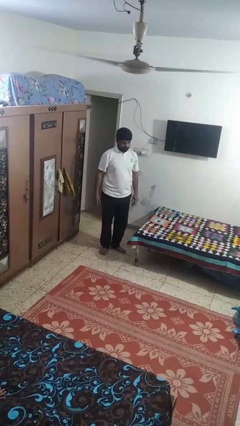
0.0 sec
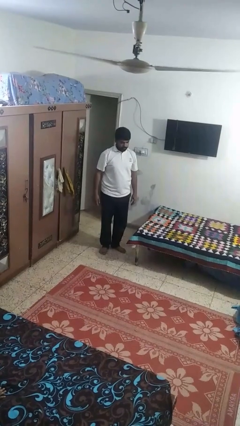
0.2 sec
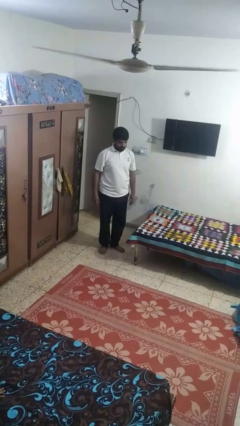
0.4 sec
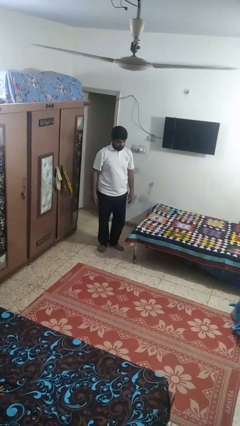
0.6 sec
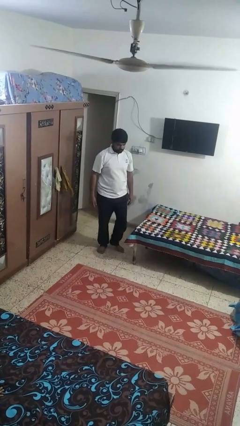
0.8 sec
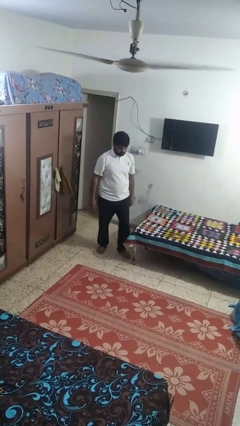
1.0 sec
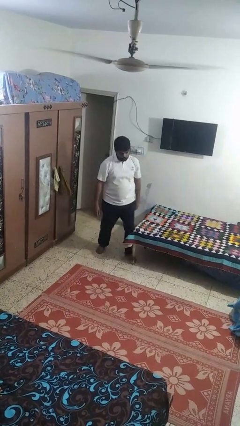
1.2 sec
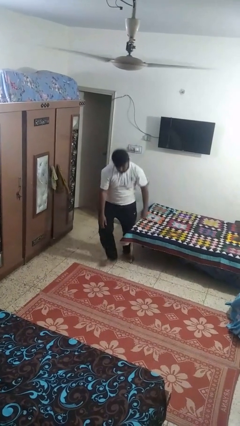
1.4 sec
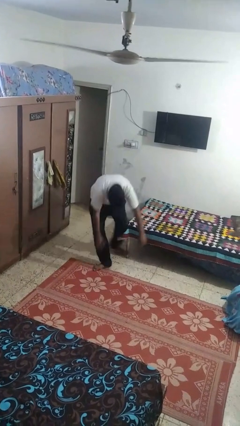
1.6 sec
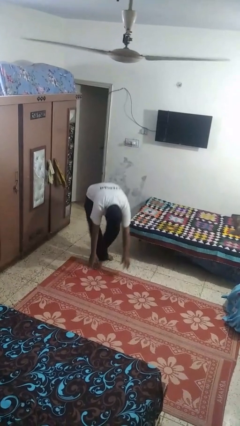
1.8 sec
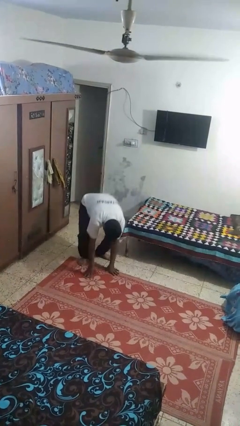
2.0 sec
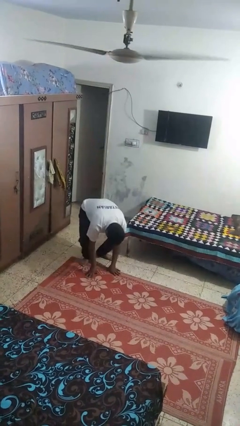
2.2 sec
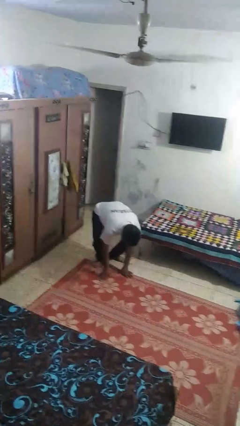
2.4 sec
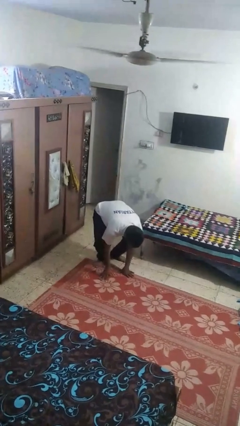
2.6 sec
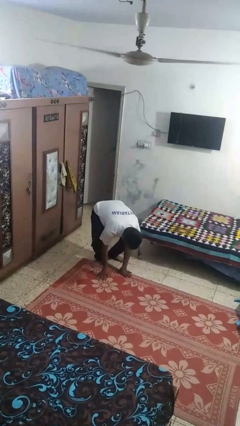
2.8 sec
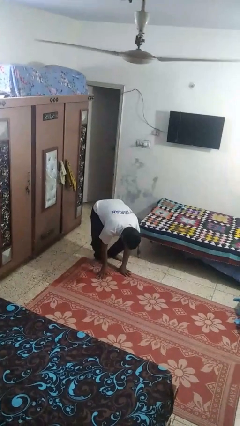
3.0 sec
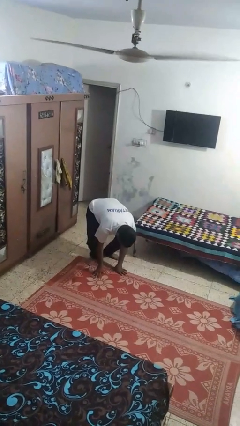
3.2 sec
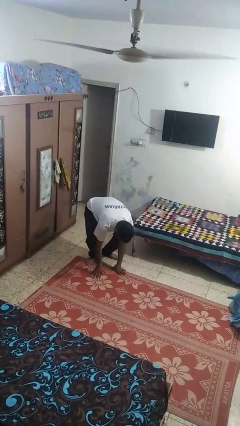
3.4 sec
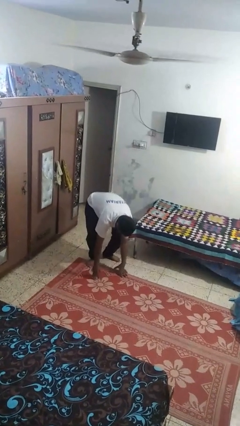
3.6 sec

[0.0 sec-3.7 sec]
person trips on object on floor

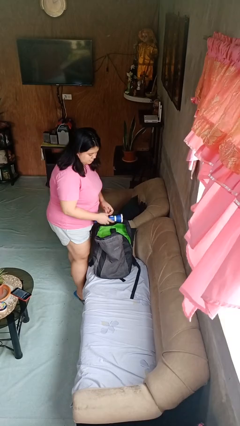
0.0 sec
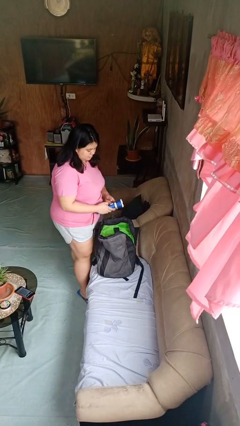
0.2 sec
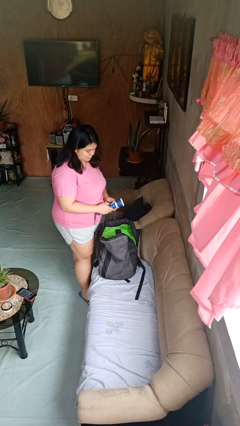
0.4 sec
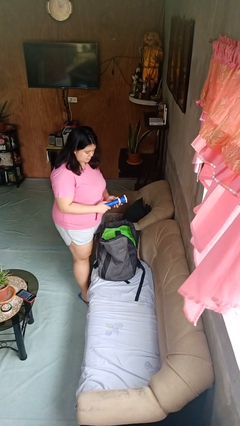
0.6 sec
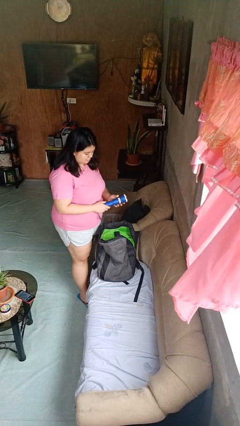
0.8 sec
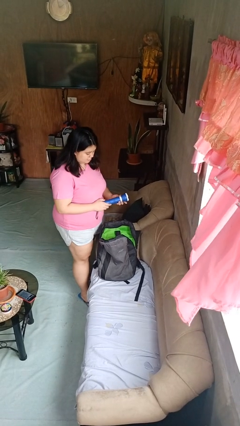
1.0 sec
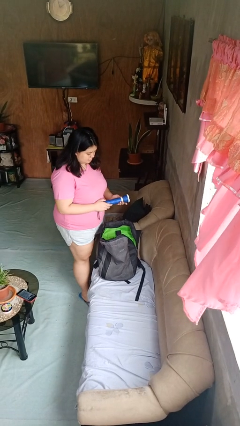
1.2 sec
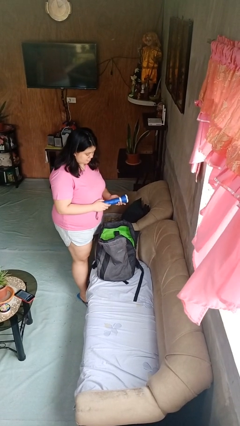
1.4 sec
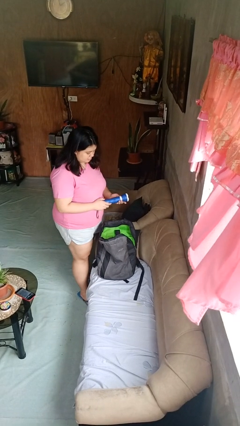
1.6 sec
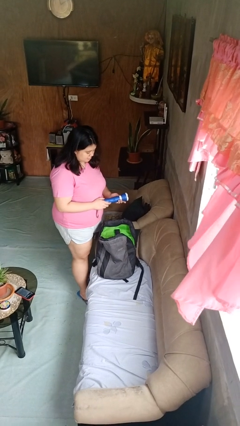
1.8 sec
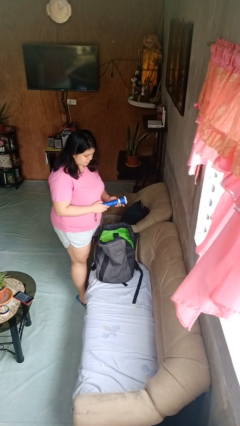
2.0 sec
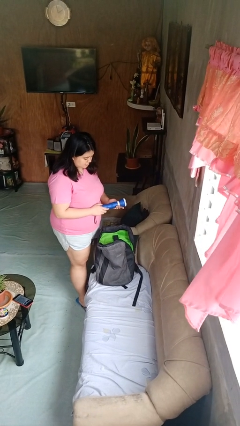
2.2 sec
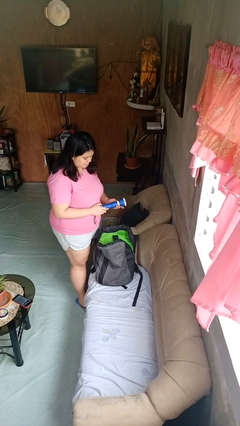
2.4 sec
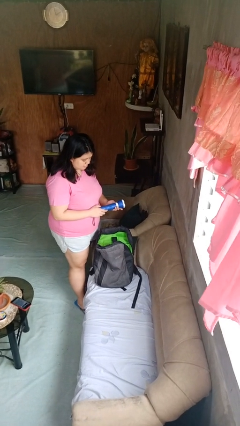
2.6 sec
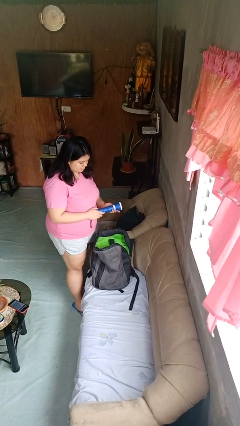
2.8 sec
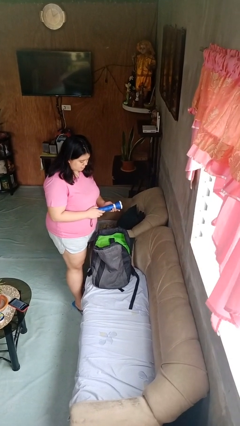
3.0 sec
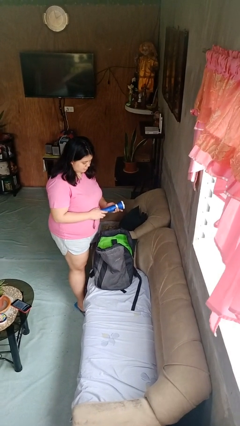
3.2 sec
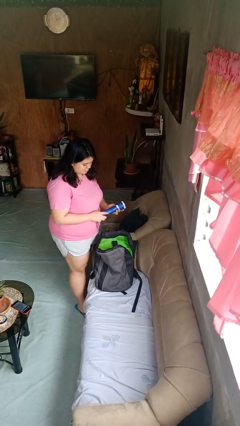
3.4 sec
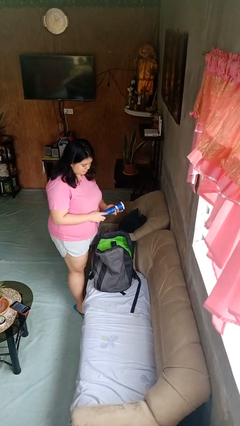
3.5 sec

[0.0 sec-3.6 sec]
person takes object from backpack

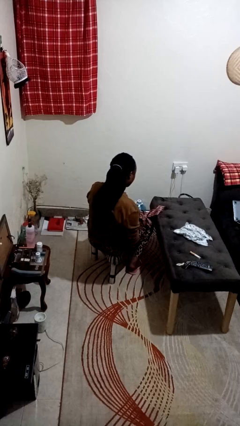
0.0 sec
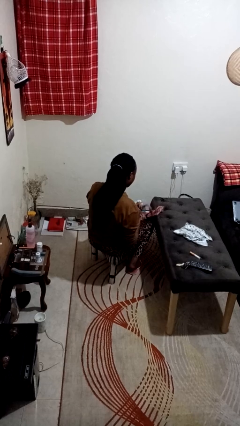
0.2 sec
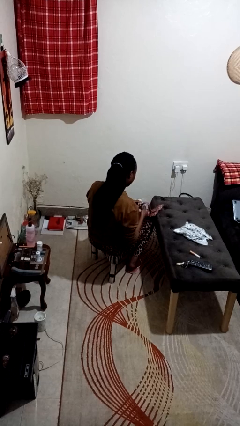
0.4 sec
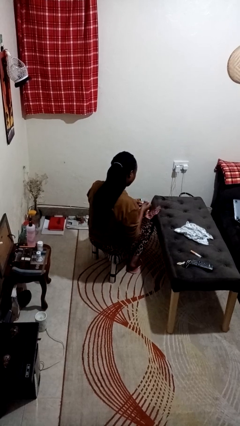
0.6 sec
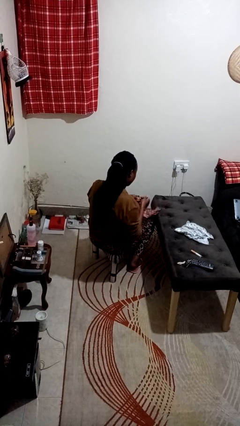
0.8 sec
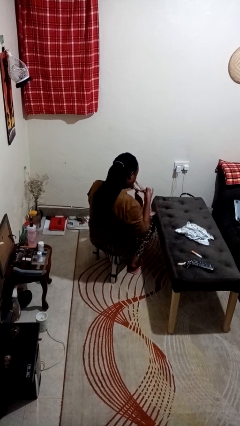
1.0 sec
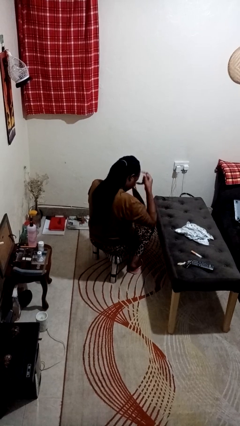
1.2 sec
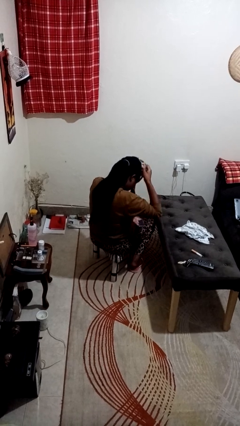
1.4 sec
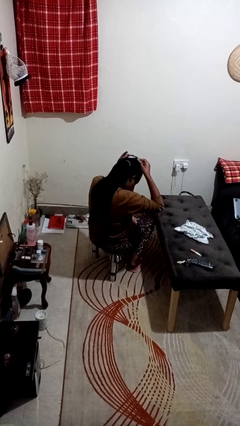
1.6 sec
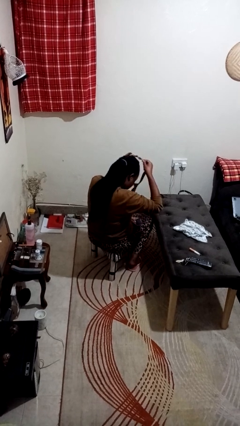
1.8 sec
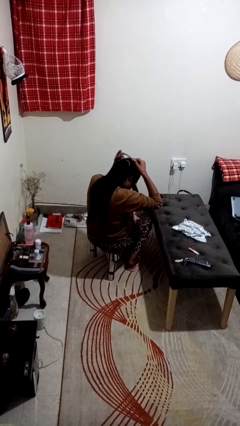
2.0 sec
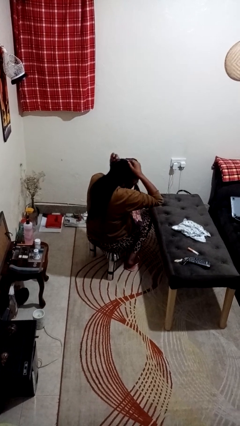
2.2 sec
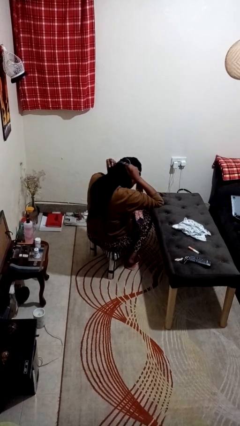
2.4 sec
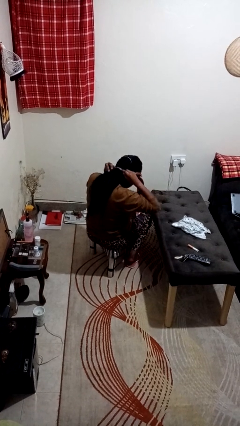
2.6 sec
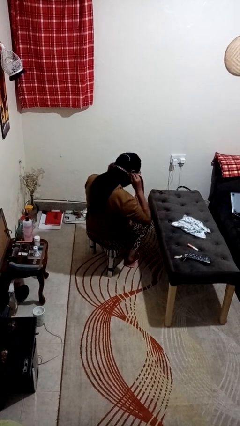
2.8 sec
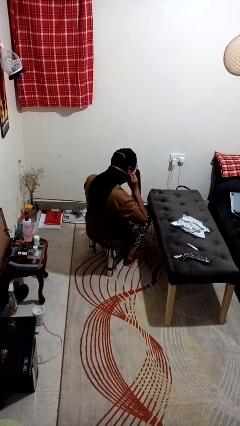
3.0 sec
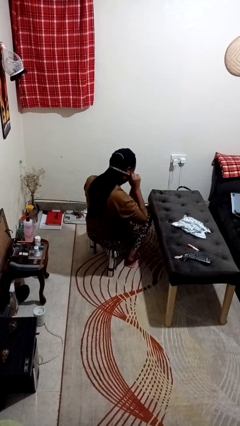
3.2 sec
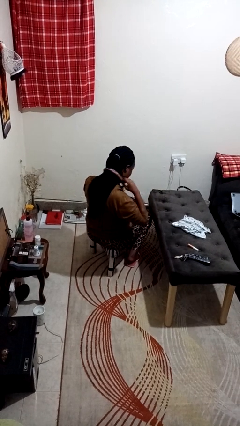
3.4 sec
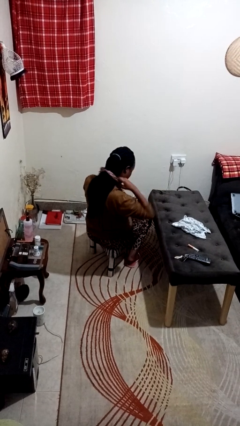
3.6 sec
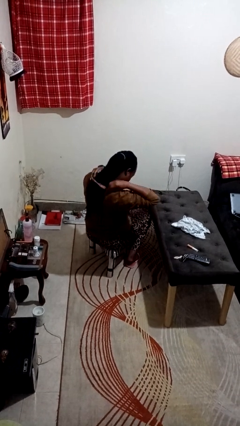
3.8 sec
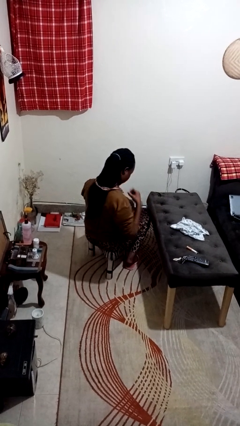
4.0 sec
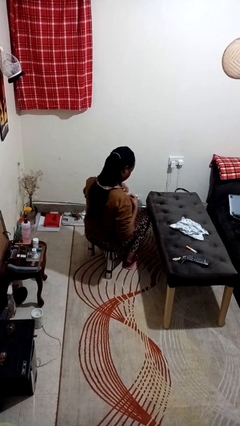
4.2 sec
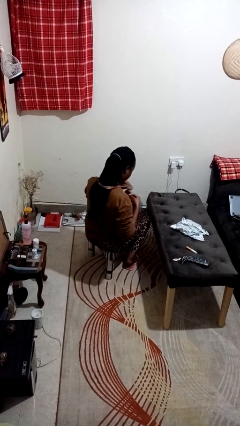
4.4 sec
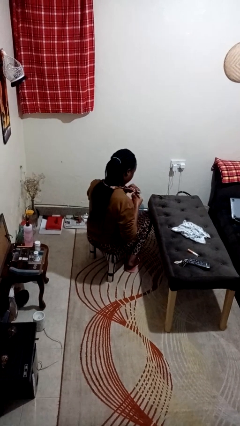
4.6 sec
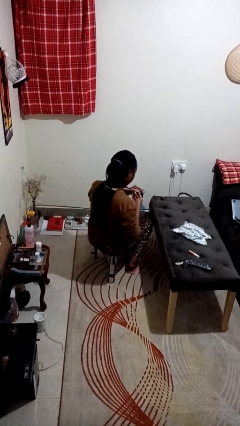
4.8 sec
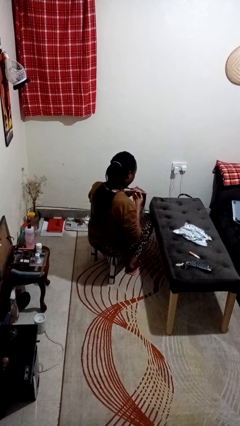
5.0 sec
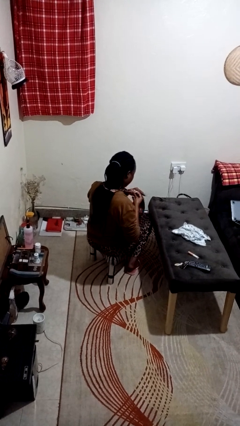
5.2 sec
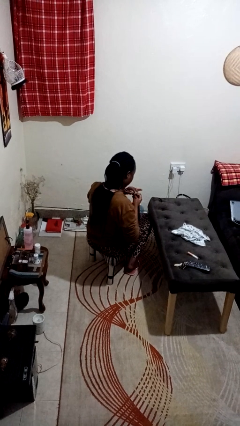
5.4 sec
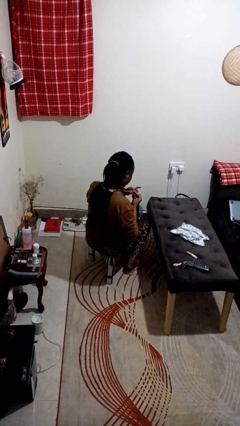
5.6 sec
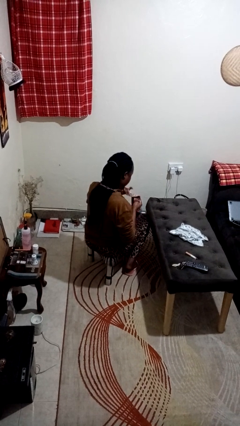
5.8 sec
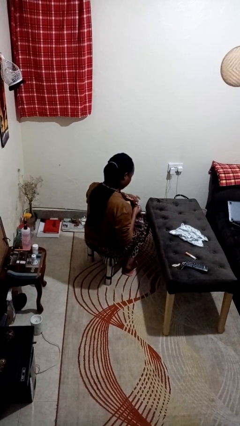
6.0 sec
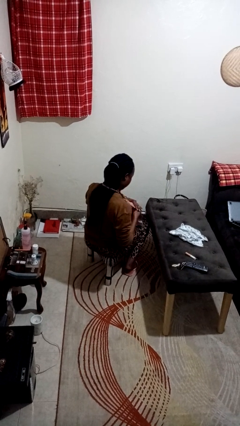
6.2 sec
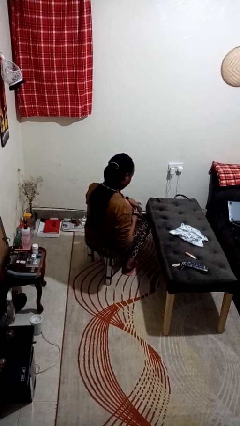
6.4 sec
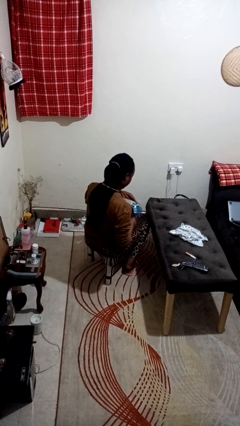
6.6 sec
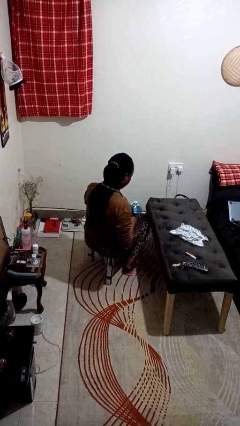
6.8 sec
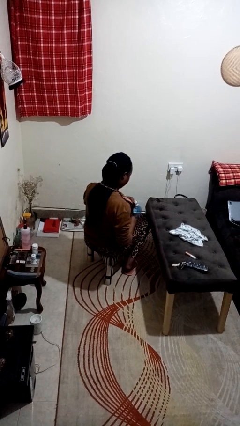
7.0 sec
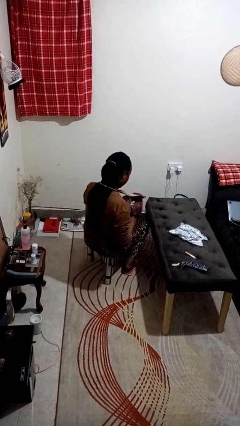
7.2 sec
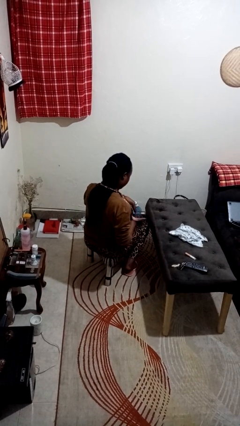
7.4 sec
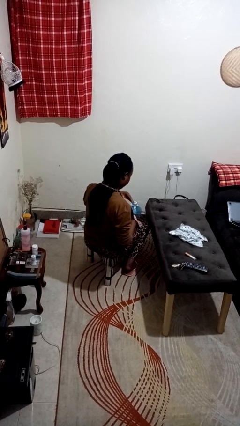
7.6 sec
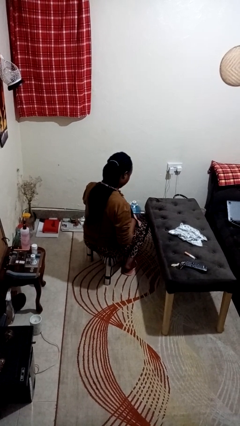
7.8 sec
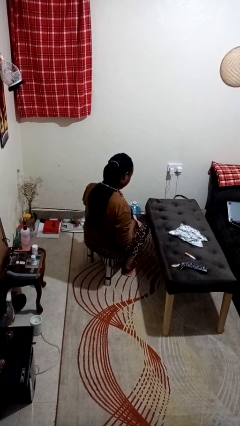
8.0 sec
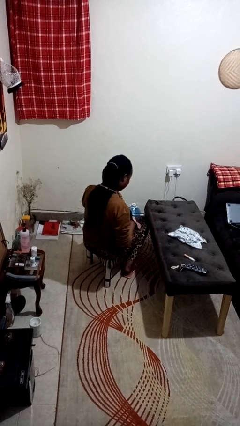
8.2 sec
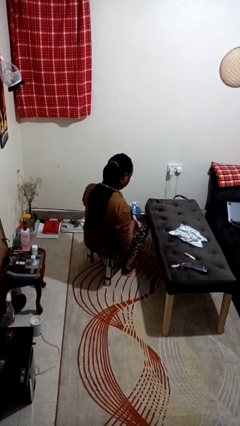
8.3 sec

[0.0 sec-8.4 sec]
person puts on necktie

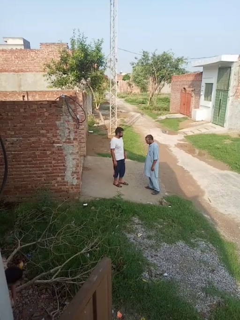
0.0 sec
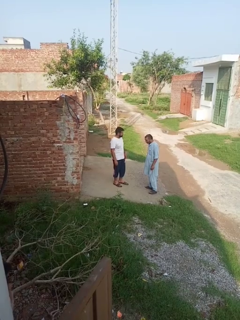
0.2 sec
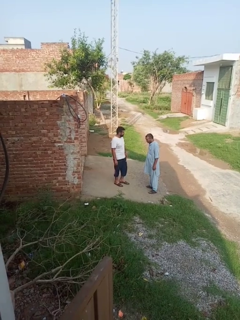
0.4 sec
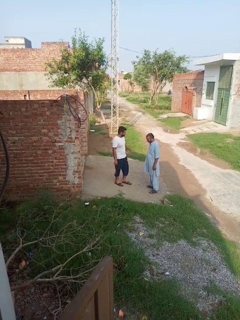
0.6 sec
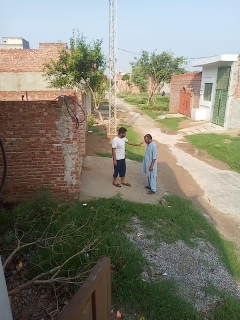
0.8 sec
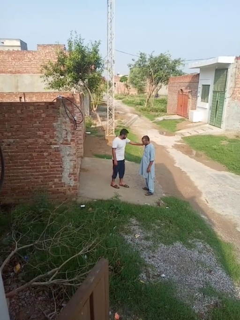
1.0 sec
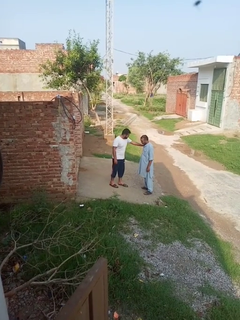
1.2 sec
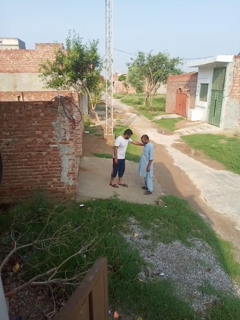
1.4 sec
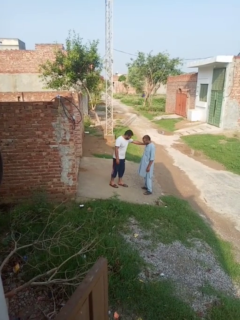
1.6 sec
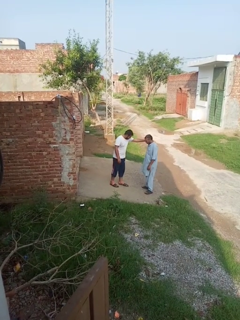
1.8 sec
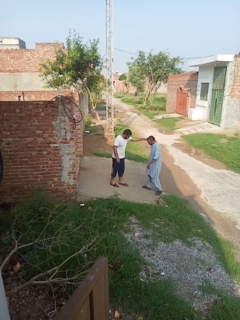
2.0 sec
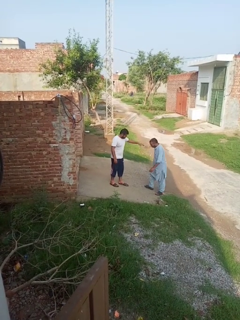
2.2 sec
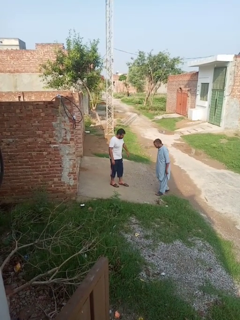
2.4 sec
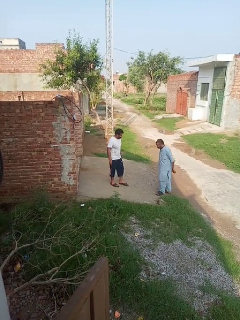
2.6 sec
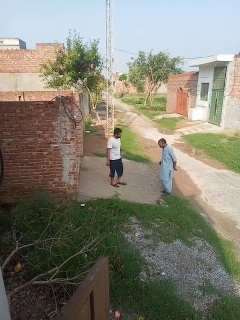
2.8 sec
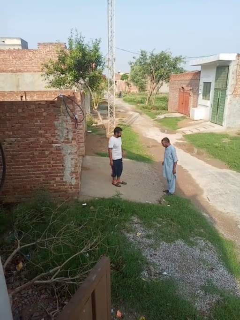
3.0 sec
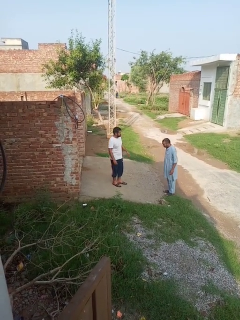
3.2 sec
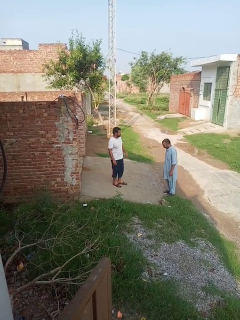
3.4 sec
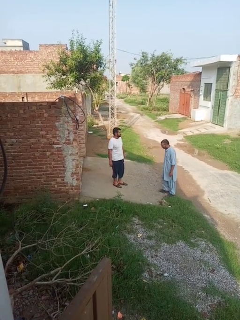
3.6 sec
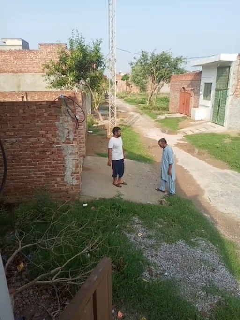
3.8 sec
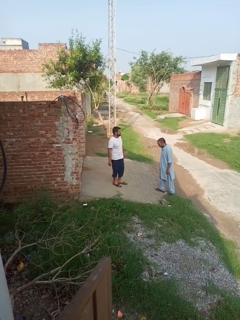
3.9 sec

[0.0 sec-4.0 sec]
person shoves person
